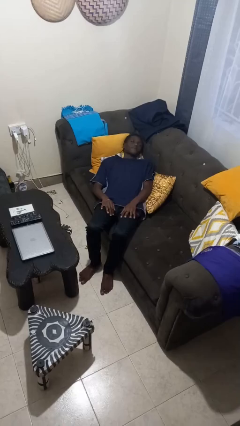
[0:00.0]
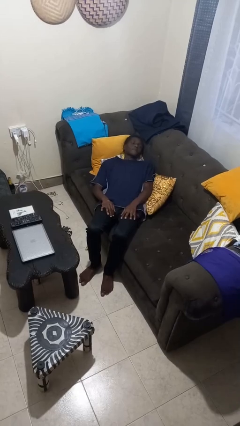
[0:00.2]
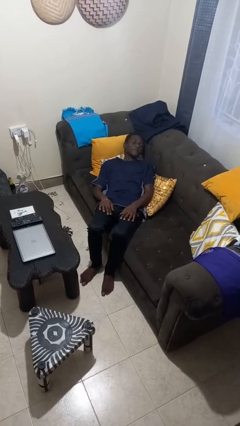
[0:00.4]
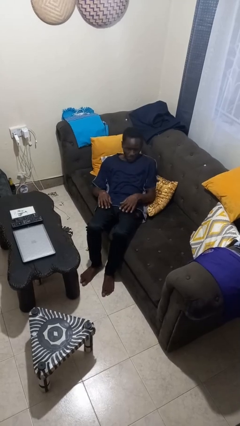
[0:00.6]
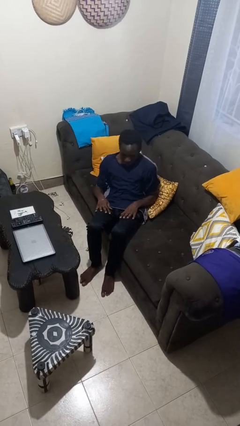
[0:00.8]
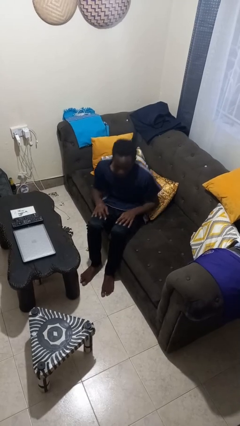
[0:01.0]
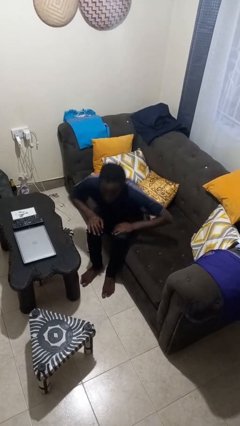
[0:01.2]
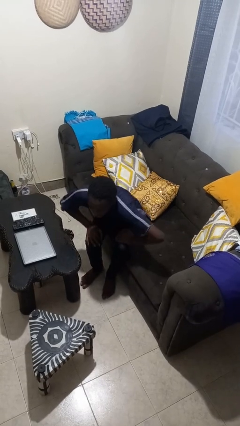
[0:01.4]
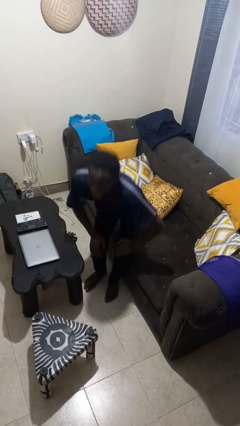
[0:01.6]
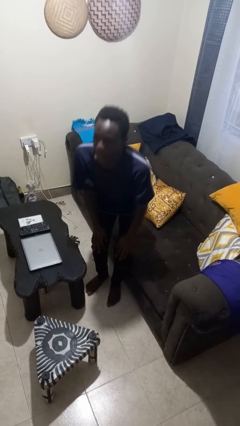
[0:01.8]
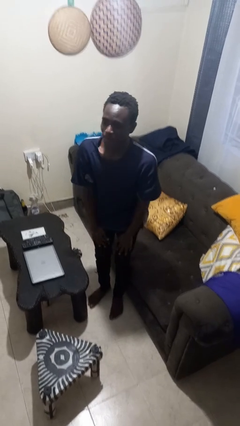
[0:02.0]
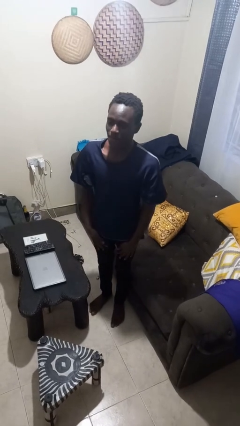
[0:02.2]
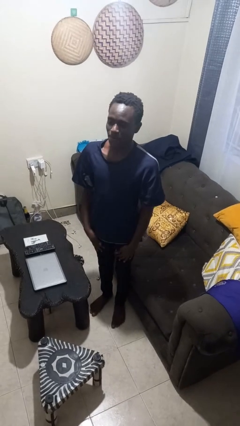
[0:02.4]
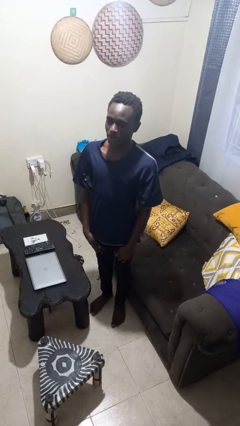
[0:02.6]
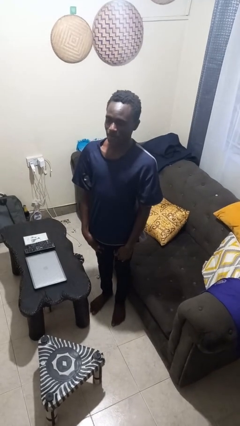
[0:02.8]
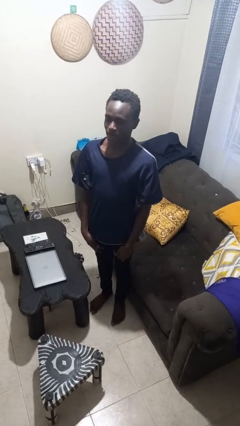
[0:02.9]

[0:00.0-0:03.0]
person stands up

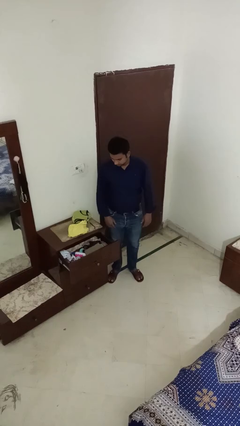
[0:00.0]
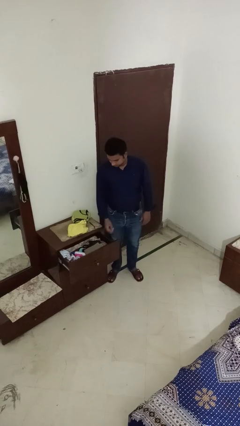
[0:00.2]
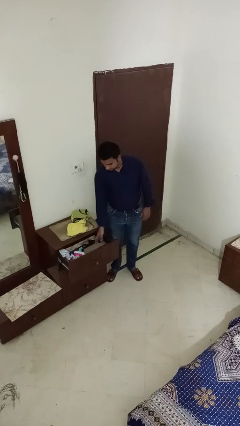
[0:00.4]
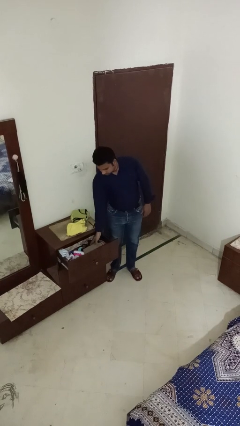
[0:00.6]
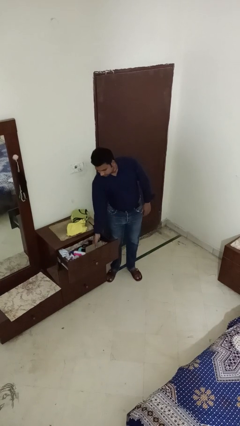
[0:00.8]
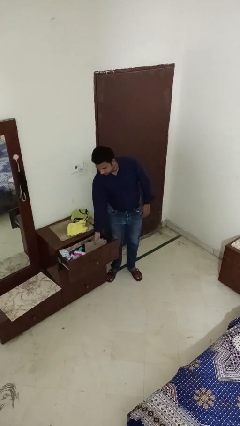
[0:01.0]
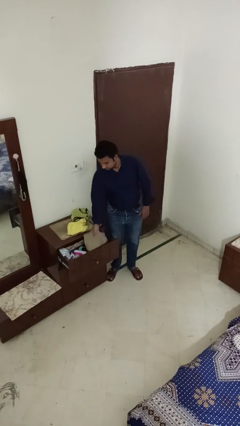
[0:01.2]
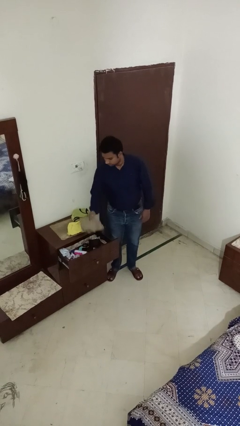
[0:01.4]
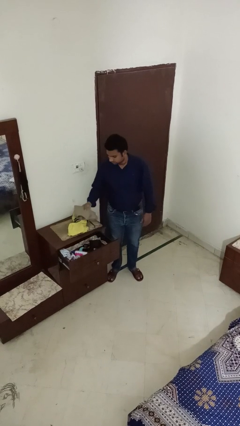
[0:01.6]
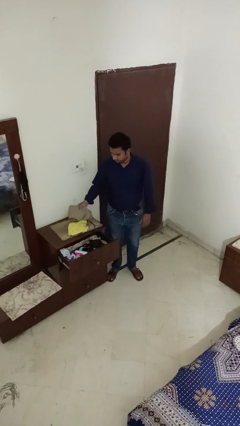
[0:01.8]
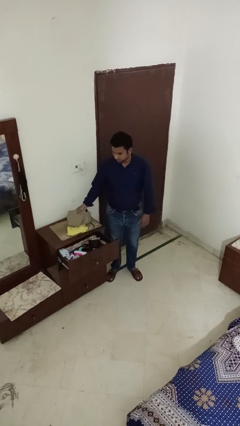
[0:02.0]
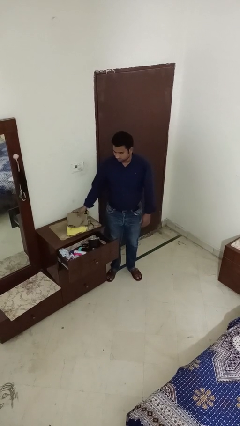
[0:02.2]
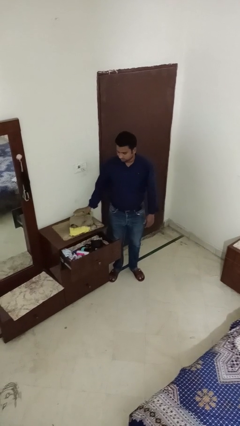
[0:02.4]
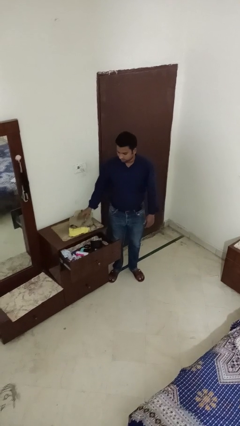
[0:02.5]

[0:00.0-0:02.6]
person takes clothes from dresser

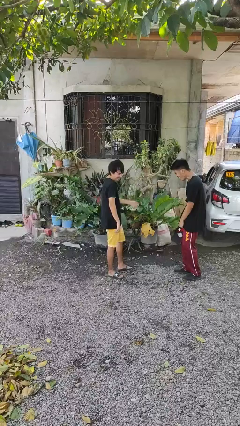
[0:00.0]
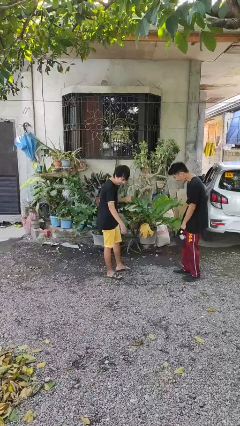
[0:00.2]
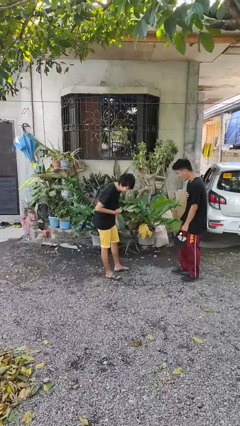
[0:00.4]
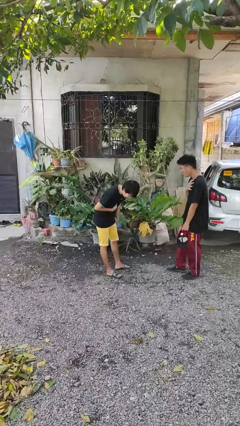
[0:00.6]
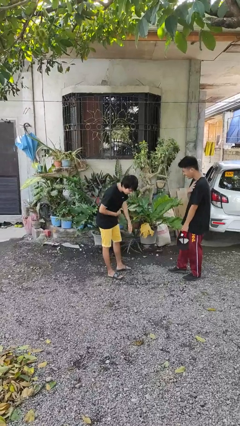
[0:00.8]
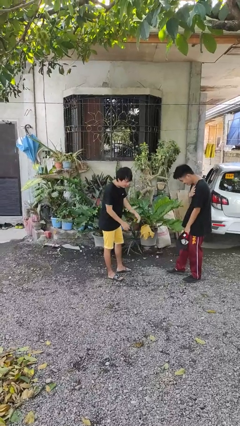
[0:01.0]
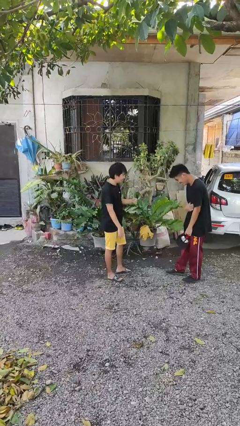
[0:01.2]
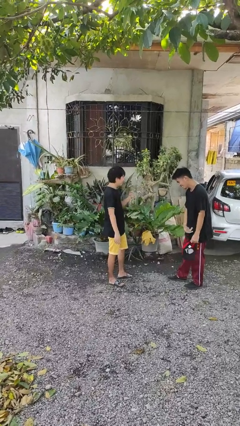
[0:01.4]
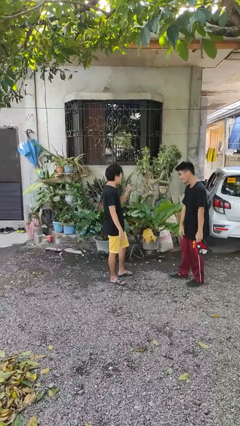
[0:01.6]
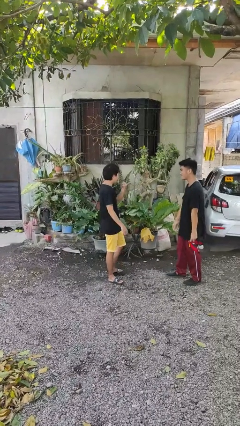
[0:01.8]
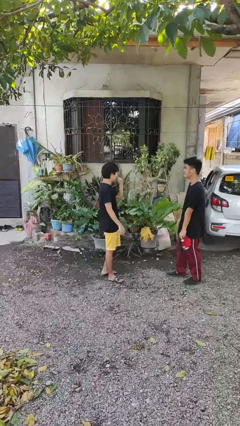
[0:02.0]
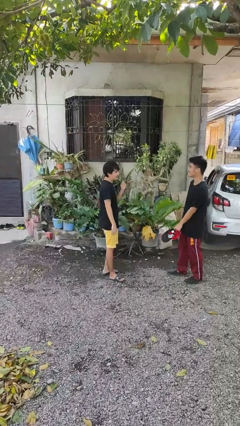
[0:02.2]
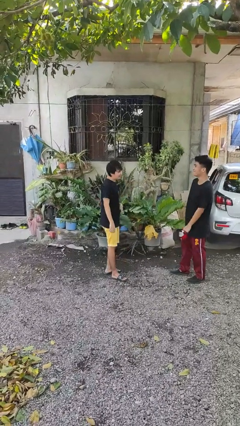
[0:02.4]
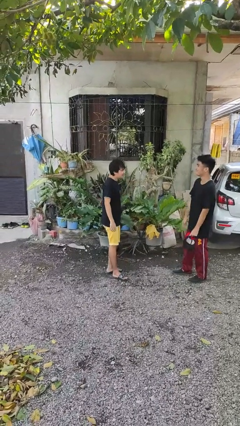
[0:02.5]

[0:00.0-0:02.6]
person laughs with person

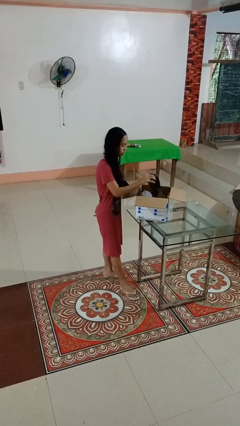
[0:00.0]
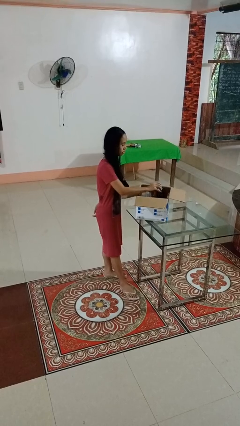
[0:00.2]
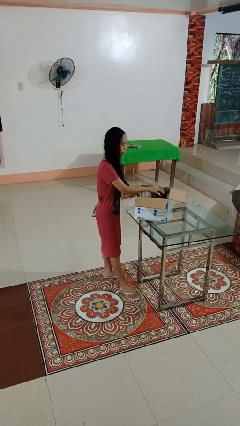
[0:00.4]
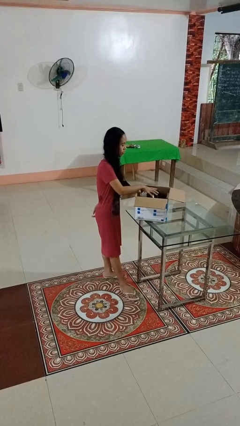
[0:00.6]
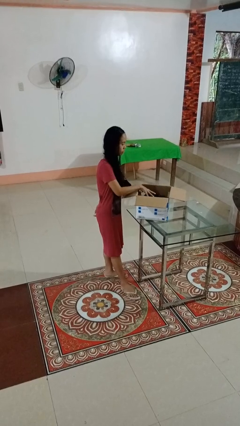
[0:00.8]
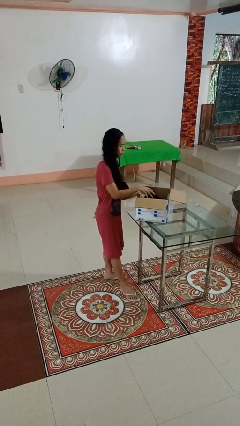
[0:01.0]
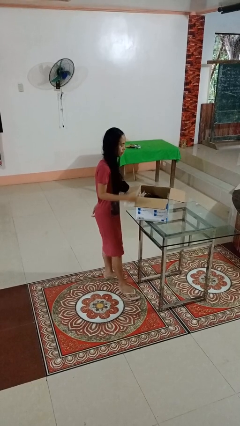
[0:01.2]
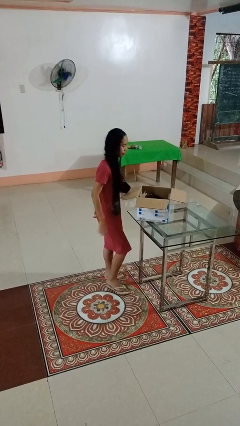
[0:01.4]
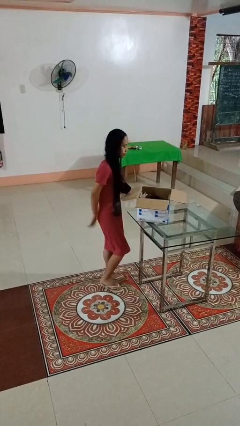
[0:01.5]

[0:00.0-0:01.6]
person puts object into box

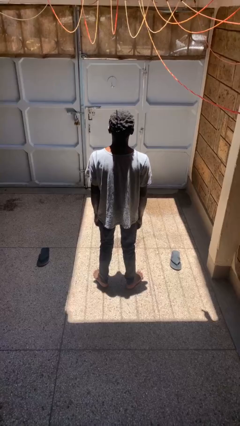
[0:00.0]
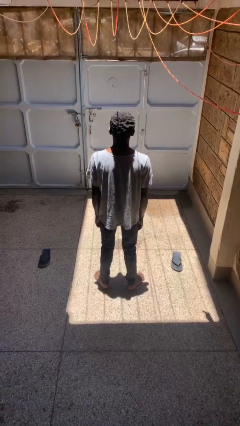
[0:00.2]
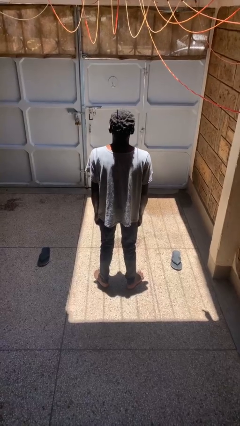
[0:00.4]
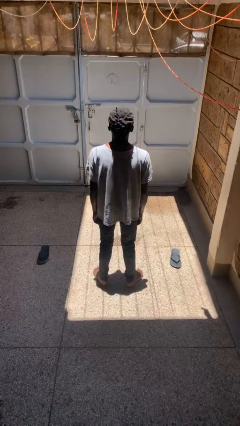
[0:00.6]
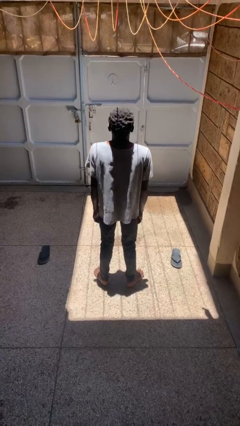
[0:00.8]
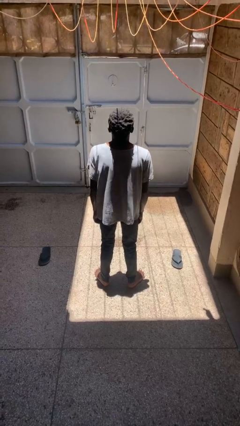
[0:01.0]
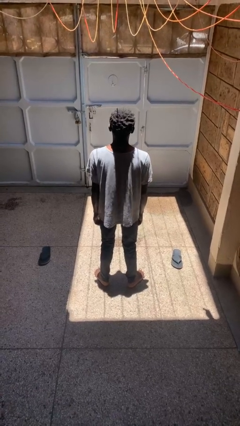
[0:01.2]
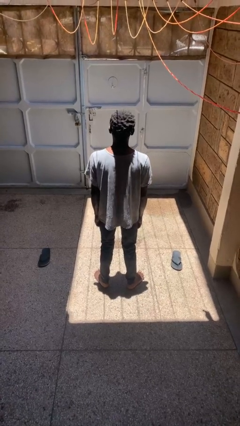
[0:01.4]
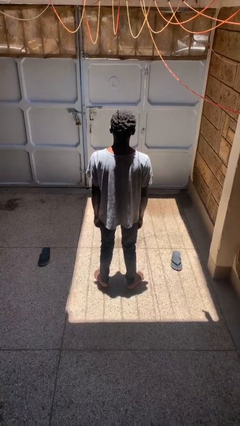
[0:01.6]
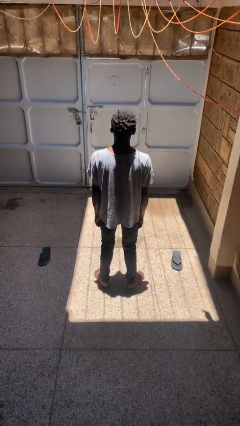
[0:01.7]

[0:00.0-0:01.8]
person shrugs

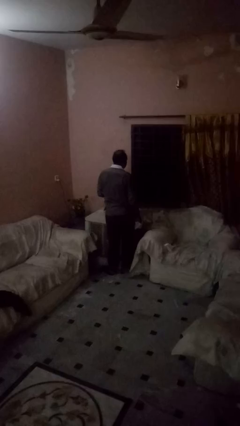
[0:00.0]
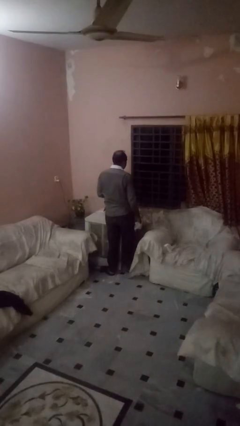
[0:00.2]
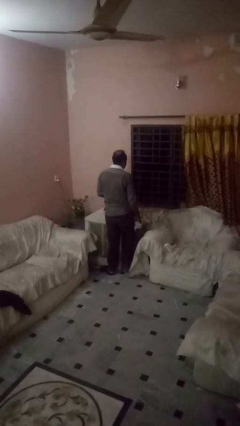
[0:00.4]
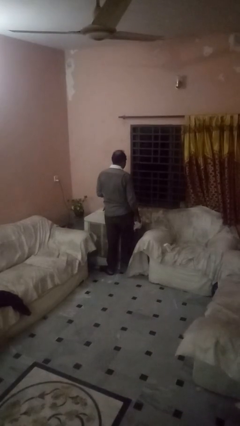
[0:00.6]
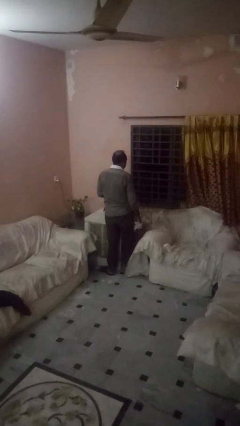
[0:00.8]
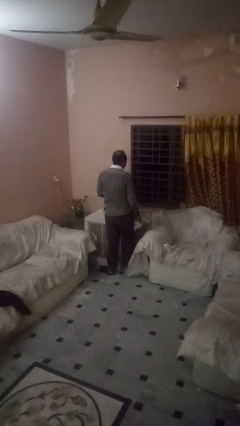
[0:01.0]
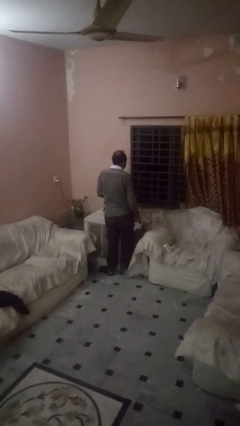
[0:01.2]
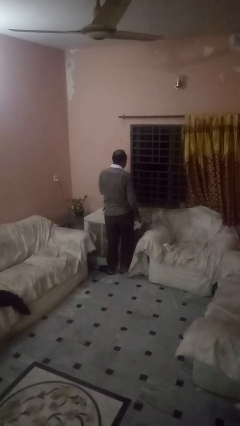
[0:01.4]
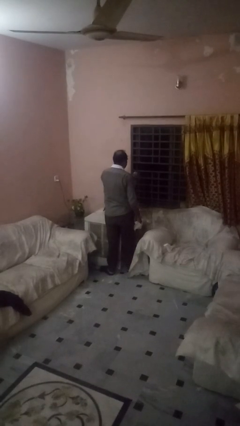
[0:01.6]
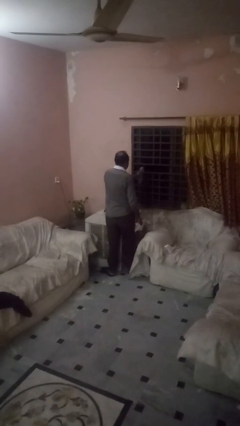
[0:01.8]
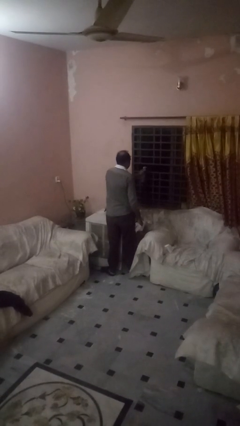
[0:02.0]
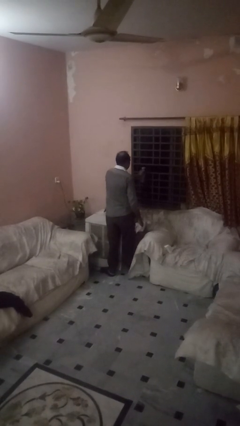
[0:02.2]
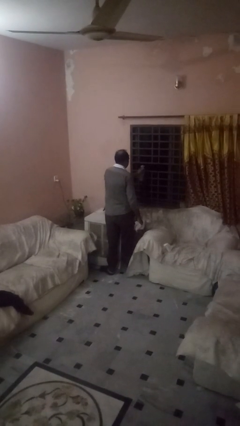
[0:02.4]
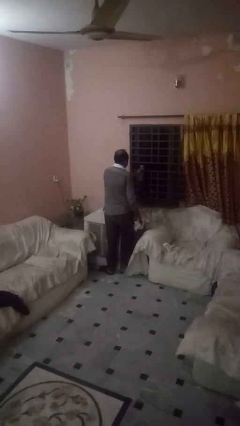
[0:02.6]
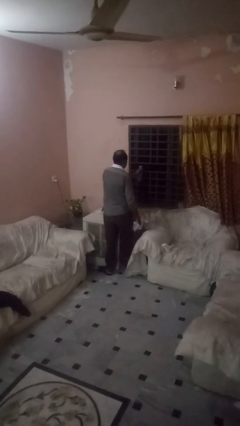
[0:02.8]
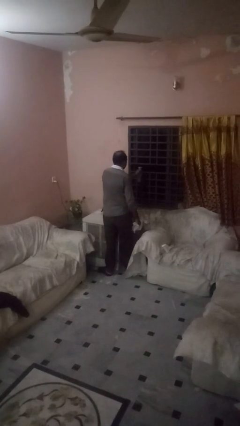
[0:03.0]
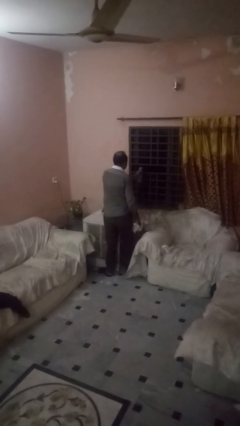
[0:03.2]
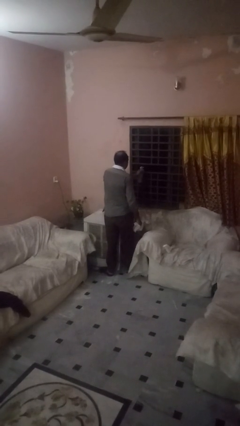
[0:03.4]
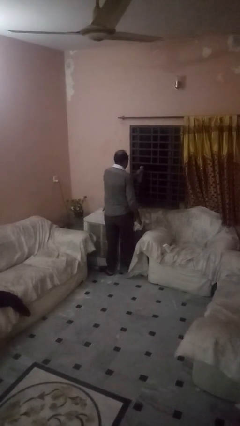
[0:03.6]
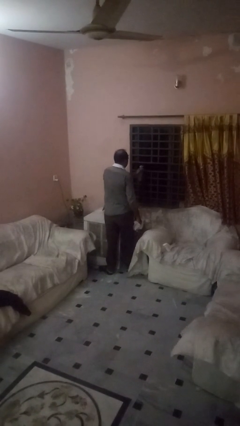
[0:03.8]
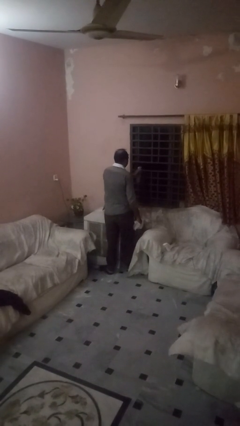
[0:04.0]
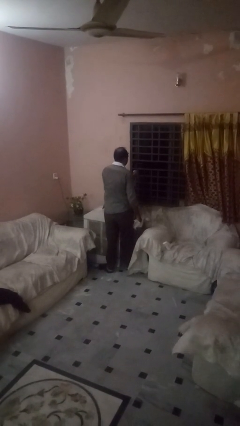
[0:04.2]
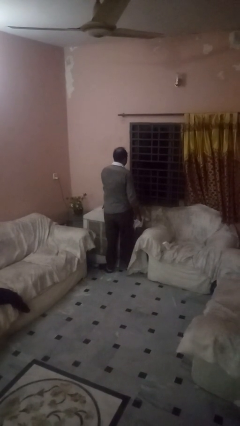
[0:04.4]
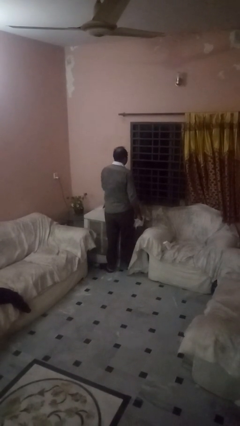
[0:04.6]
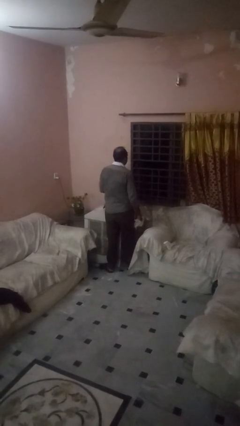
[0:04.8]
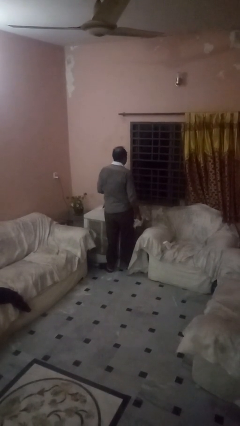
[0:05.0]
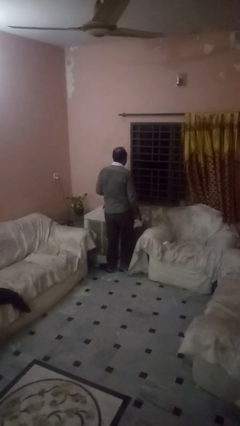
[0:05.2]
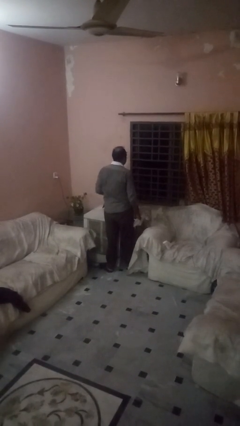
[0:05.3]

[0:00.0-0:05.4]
person sprays from bottle

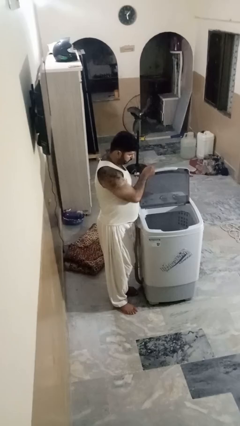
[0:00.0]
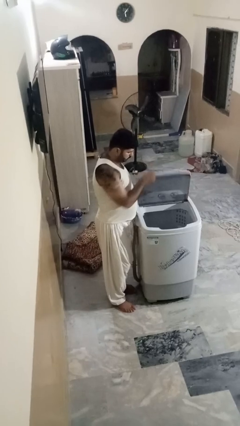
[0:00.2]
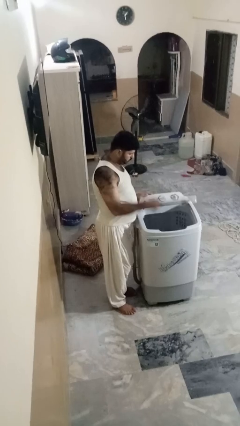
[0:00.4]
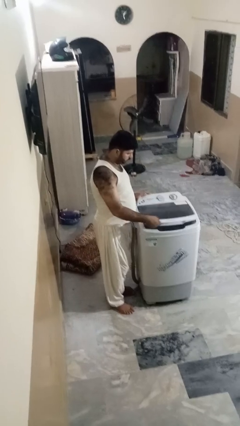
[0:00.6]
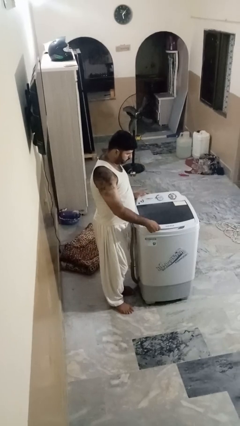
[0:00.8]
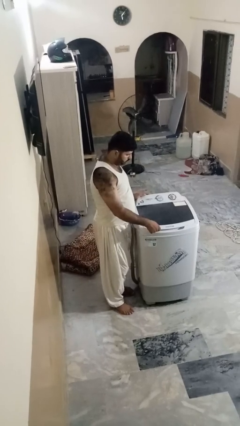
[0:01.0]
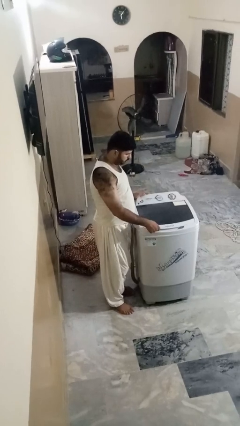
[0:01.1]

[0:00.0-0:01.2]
person closes clothes washer
